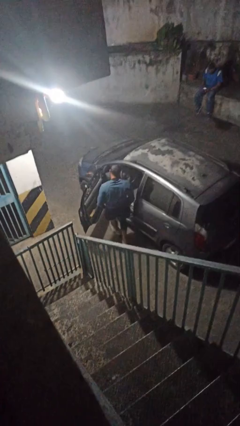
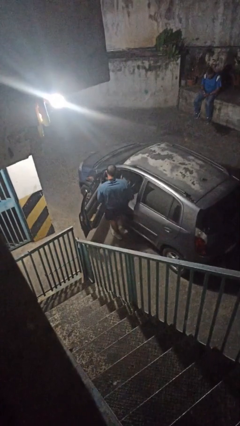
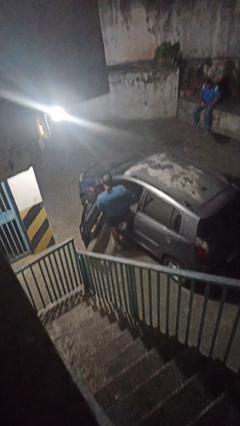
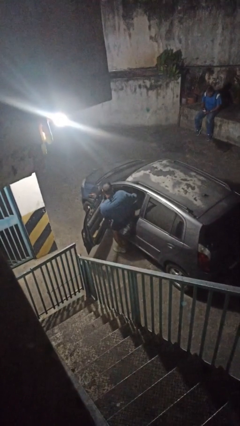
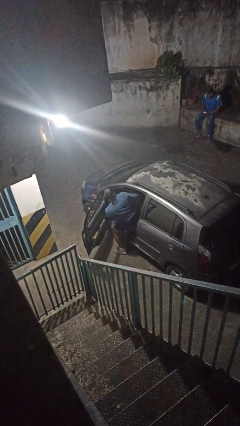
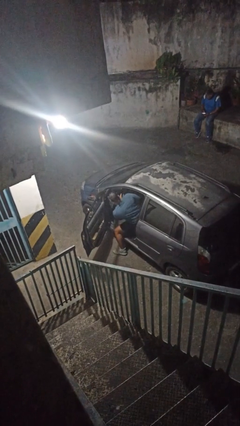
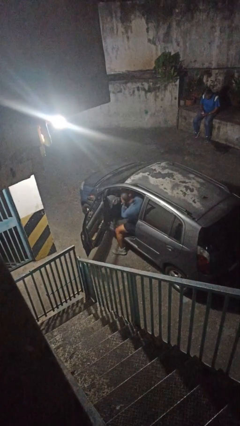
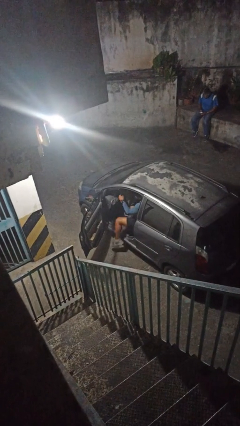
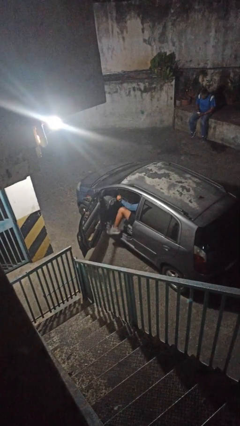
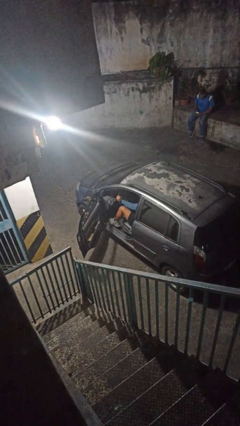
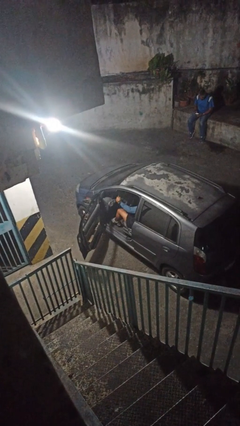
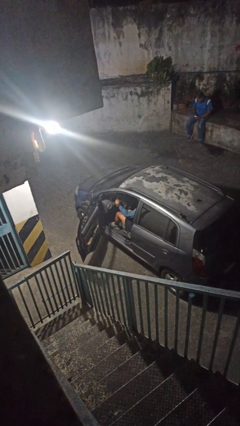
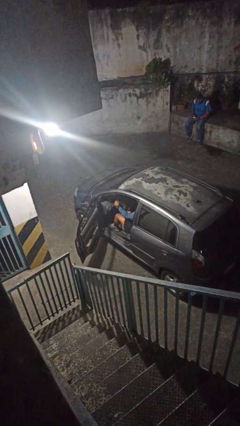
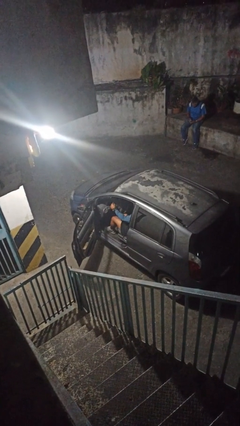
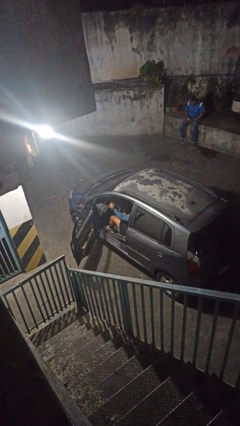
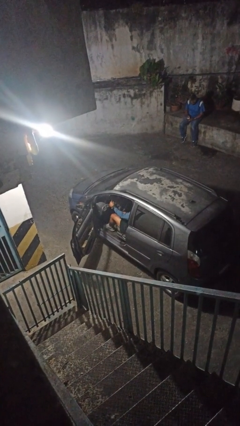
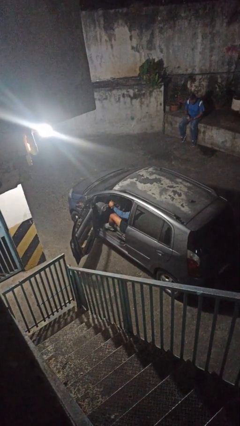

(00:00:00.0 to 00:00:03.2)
person enters car

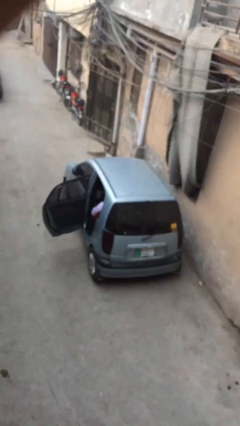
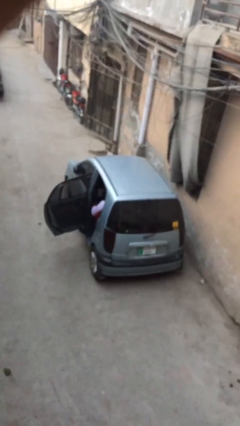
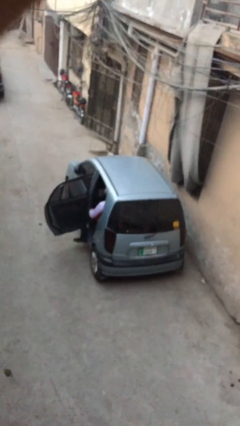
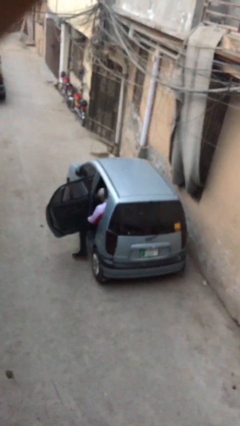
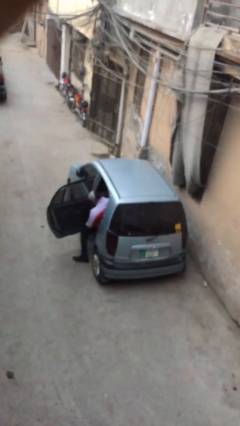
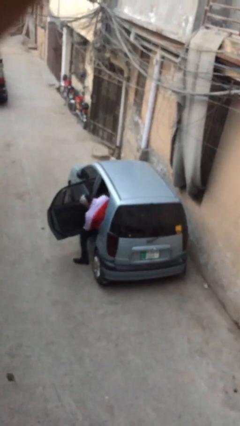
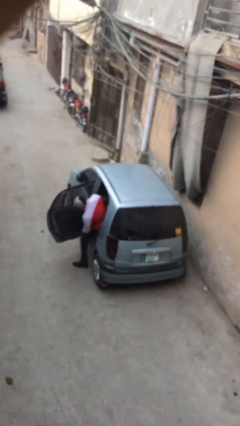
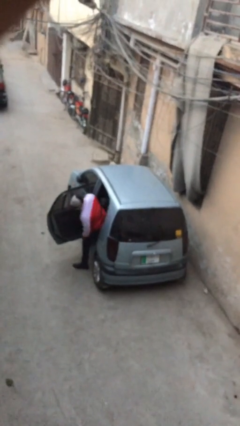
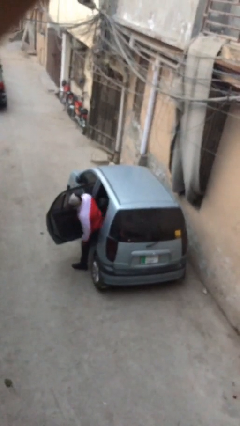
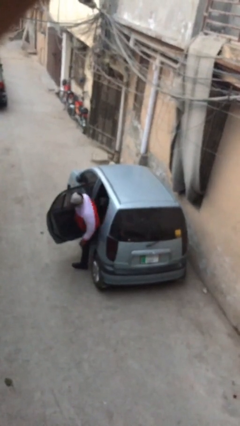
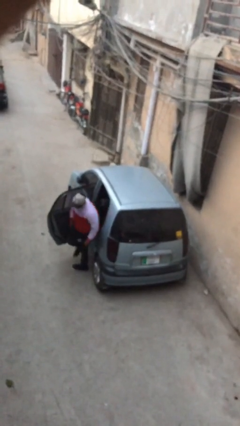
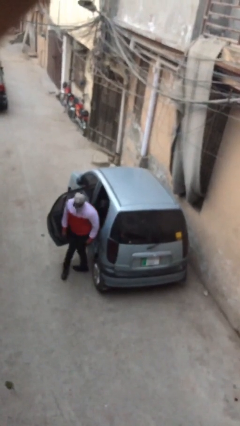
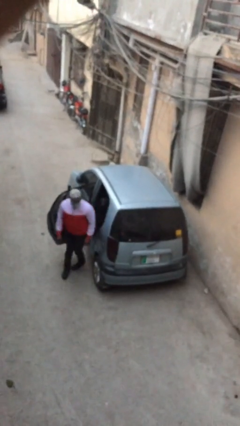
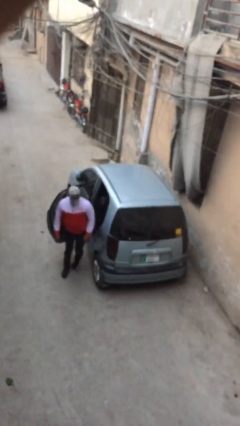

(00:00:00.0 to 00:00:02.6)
person exits car

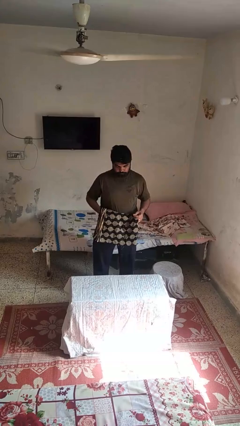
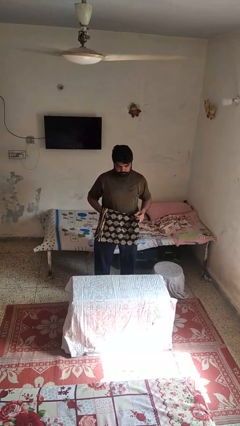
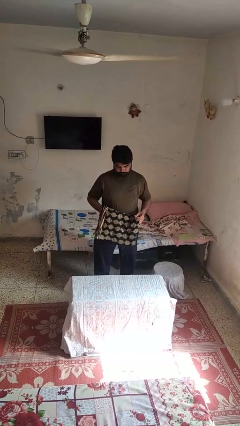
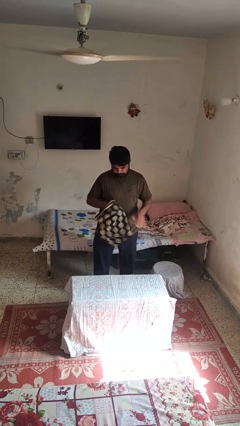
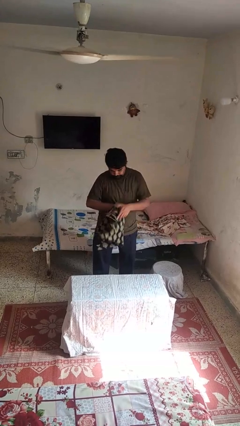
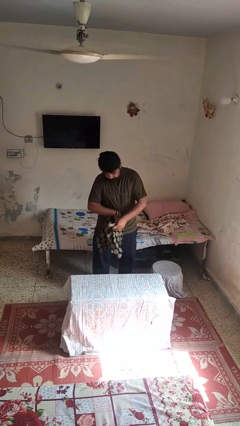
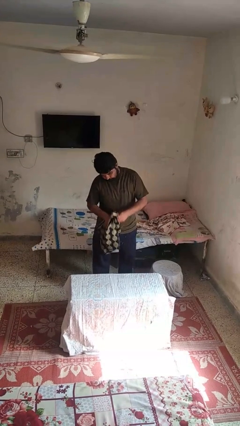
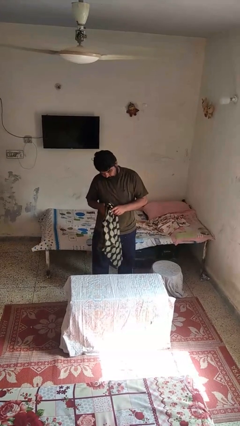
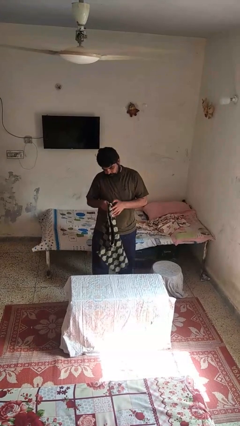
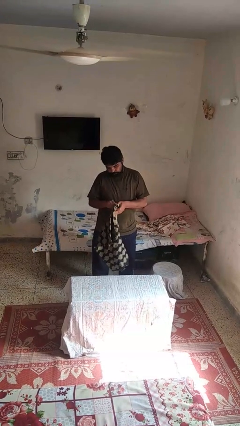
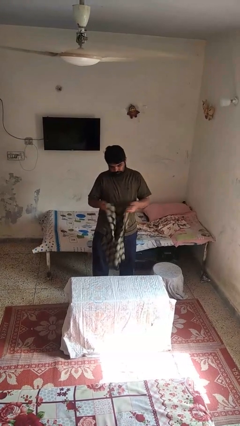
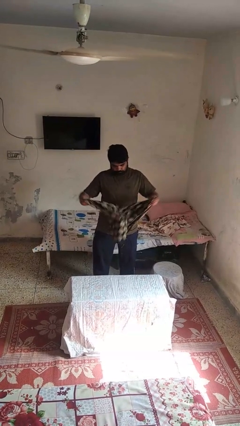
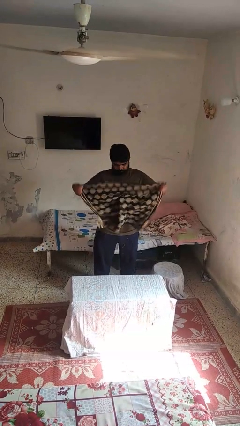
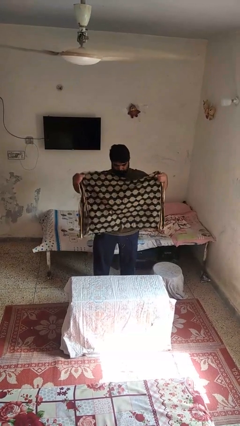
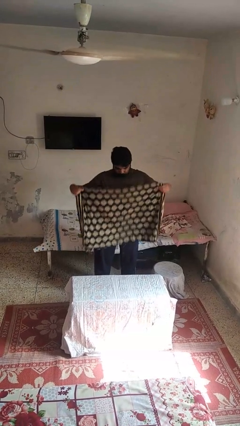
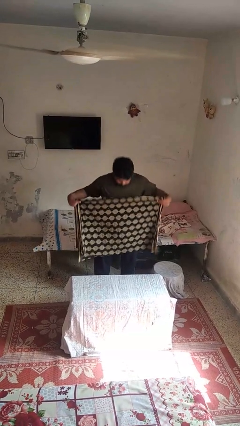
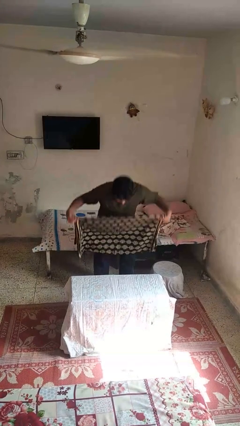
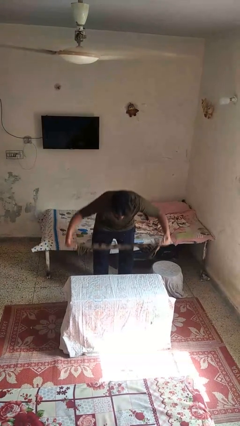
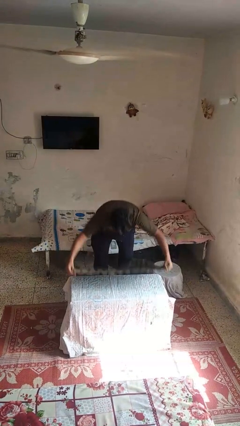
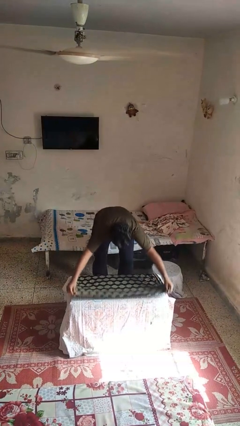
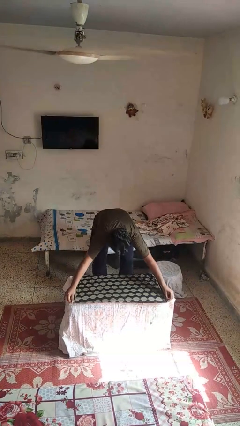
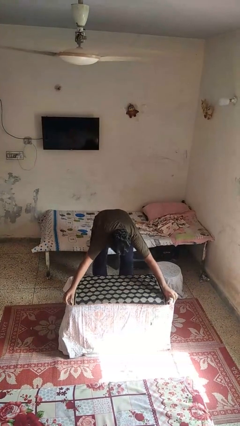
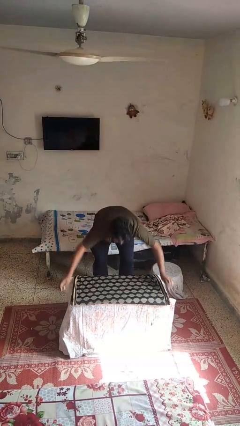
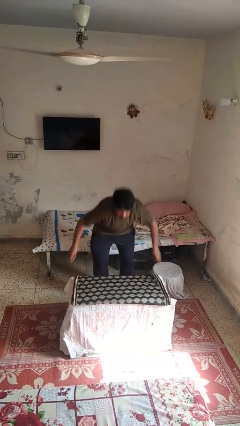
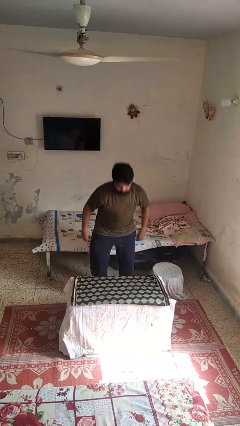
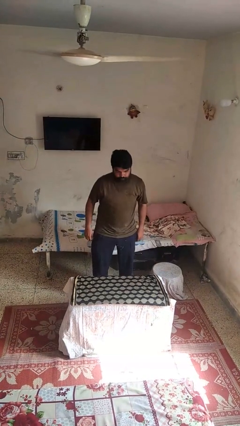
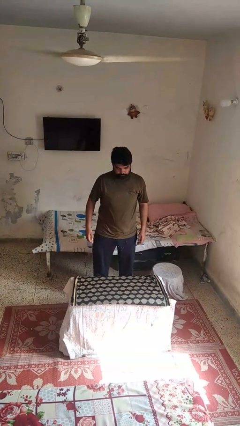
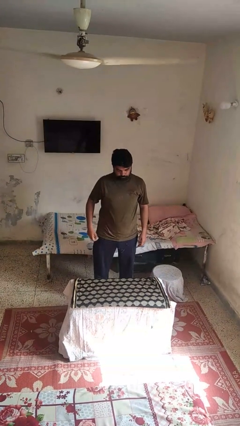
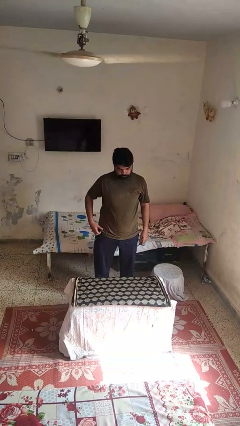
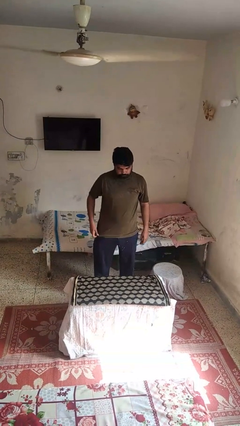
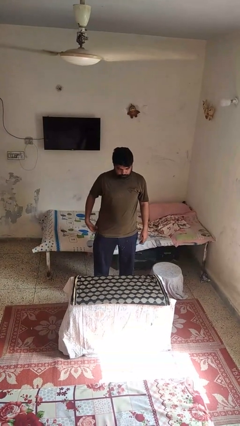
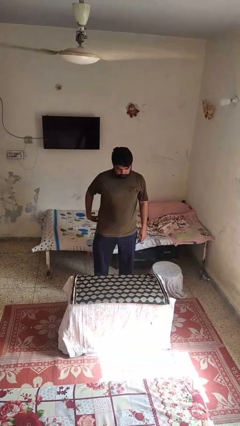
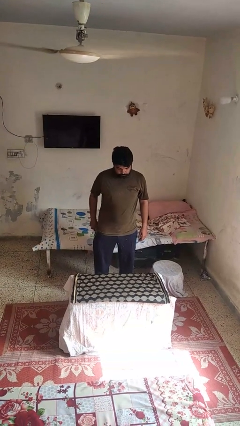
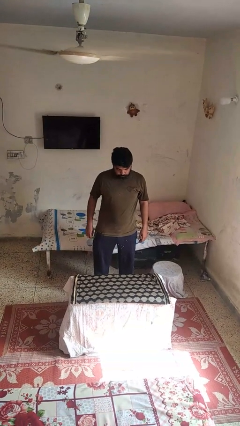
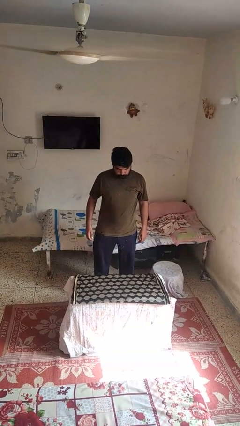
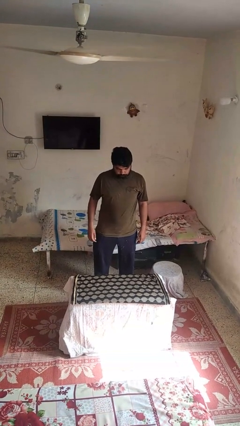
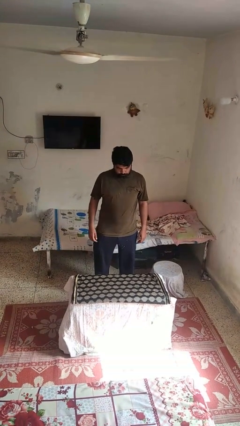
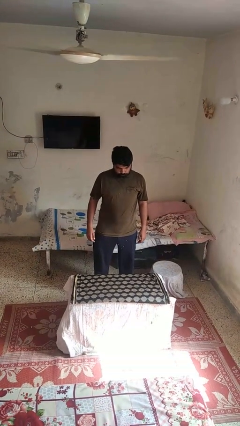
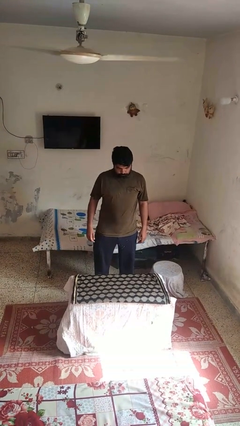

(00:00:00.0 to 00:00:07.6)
person spreads tablecloth

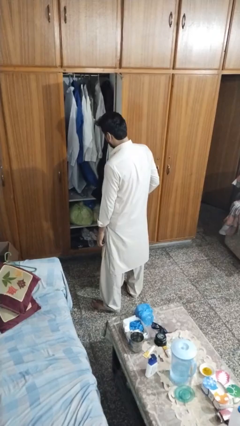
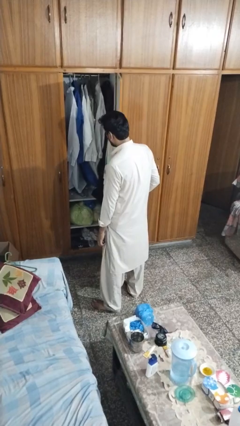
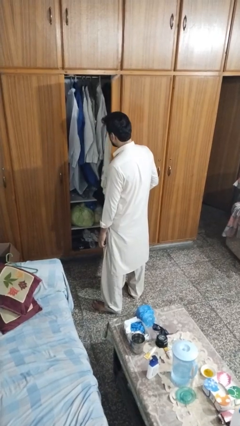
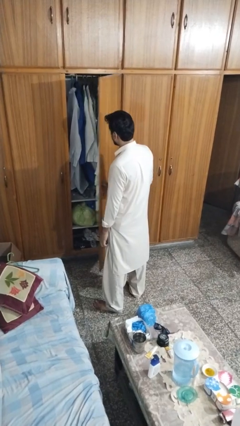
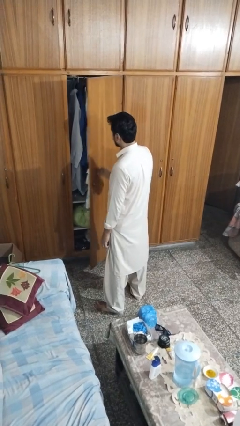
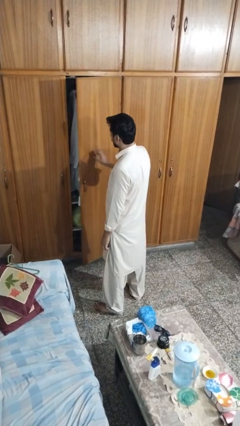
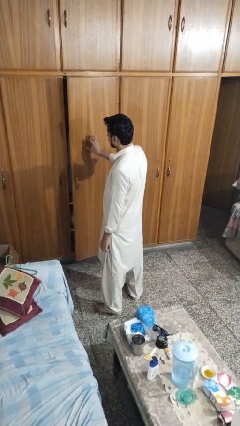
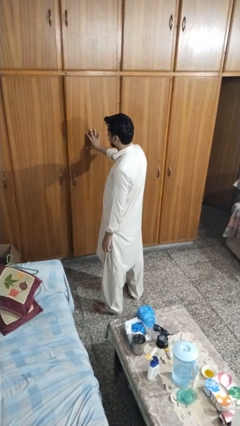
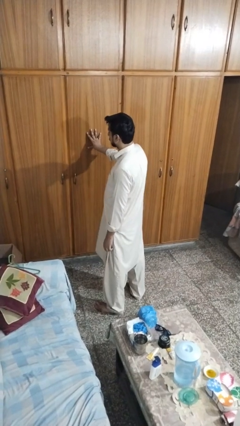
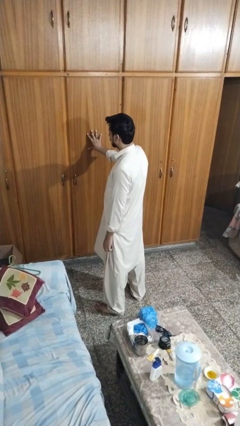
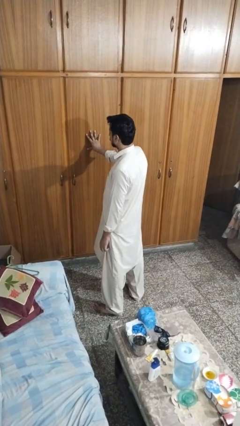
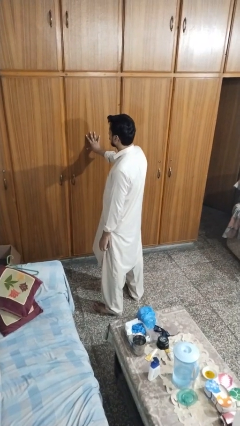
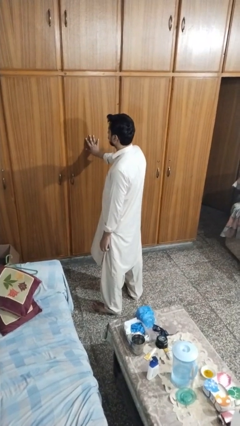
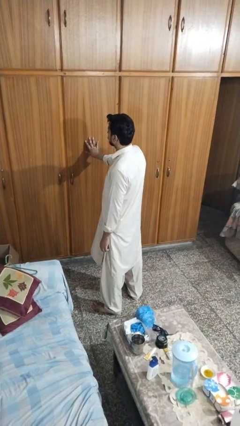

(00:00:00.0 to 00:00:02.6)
person closes closet door

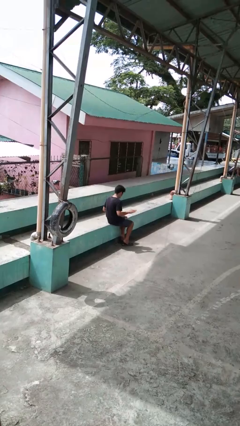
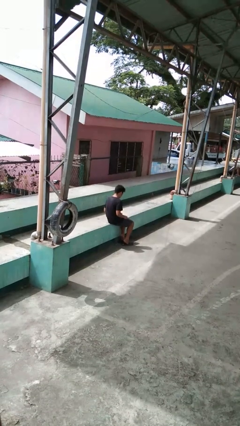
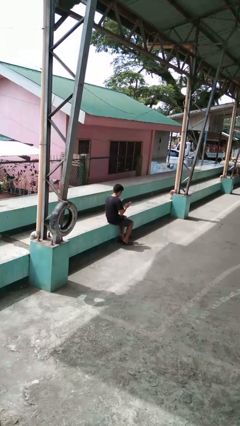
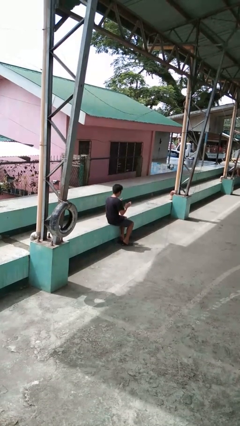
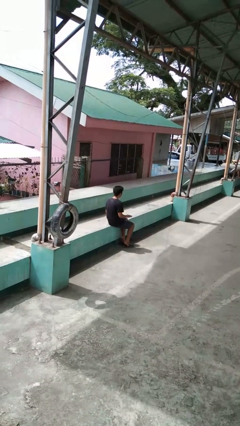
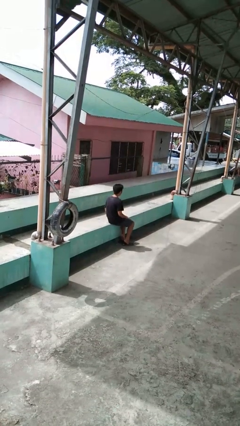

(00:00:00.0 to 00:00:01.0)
person slaps hands on thighs

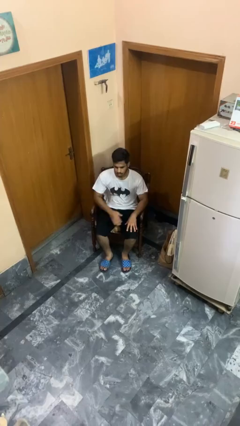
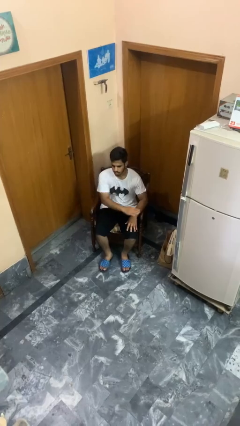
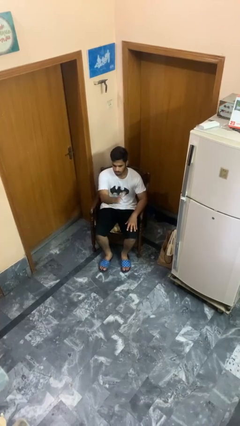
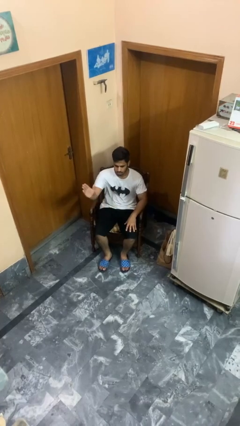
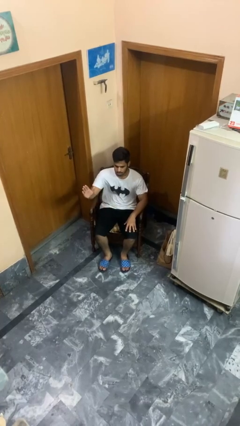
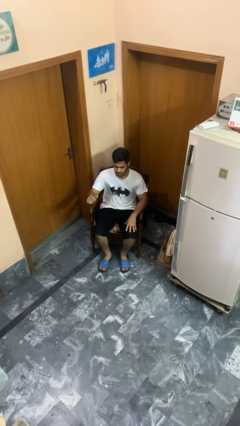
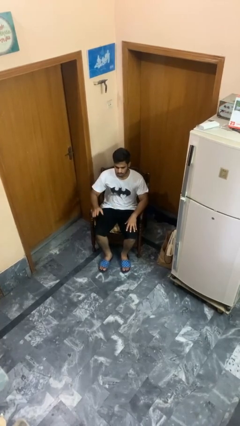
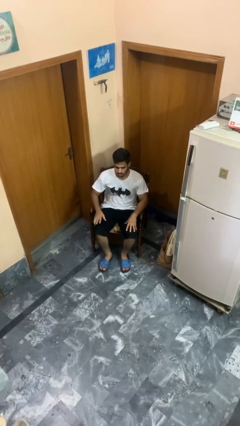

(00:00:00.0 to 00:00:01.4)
person gestures swipe right
